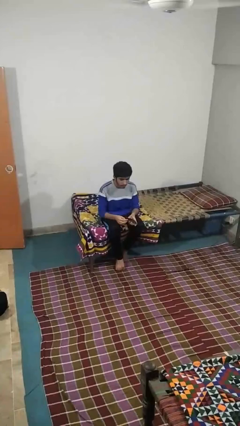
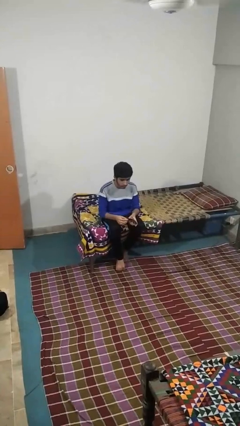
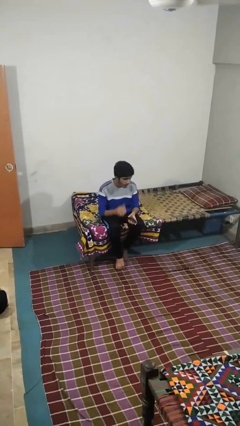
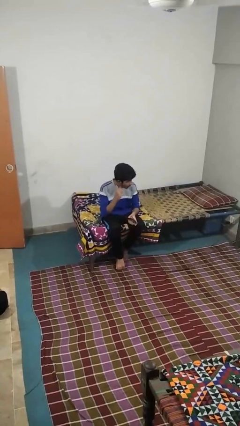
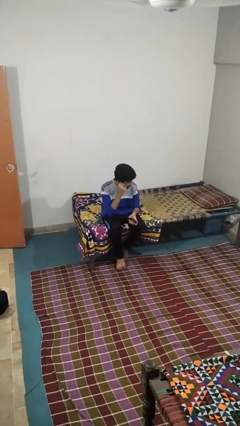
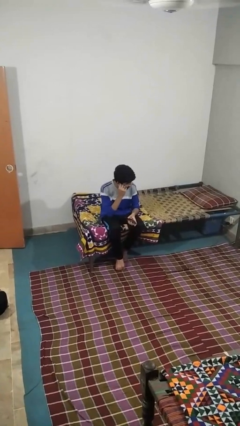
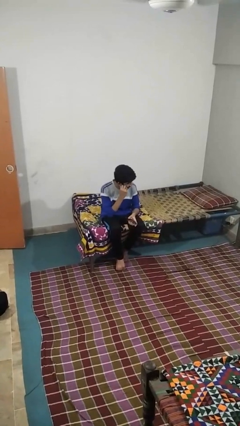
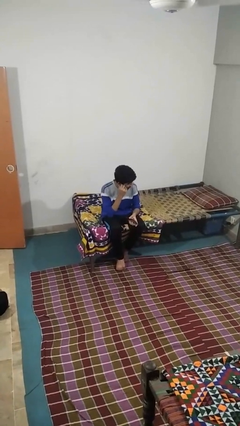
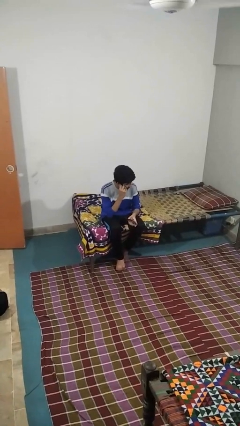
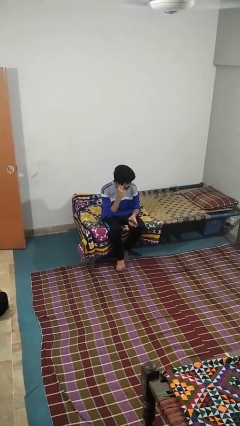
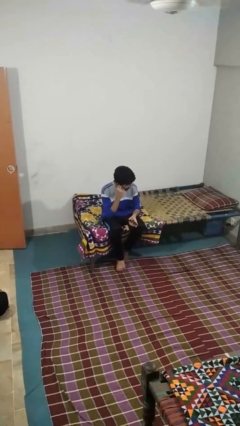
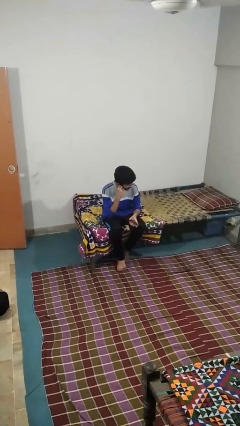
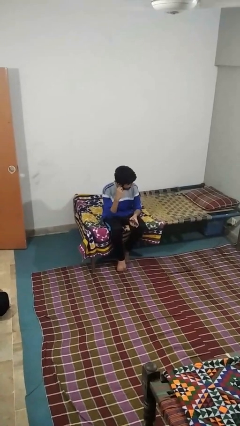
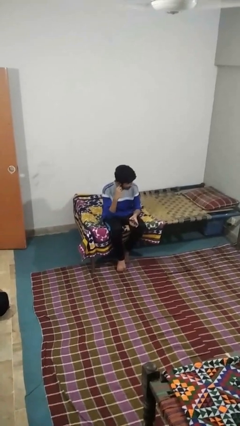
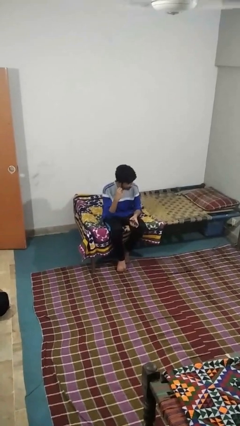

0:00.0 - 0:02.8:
person touches earlobe

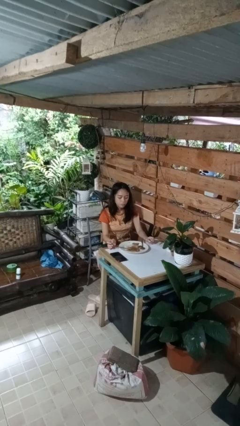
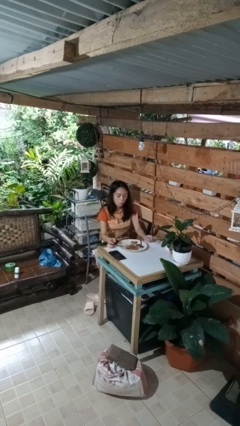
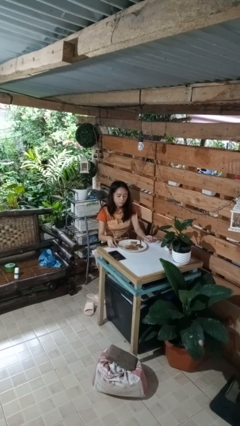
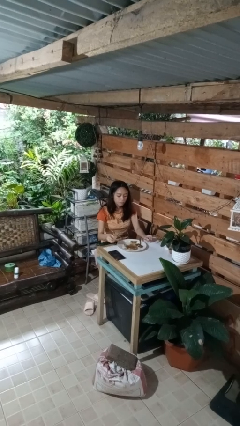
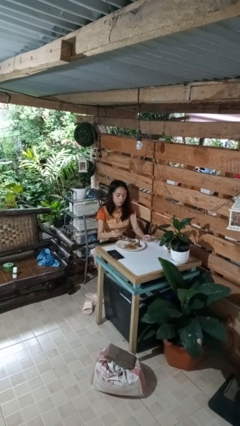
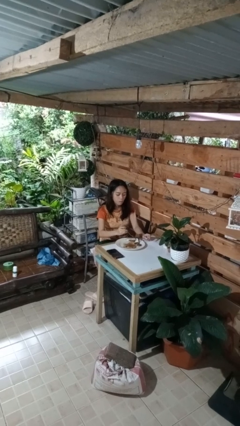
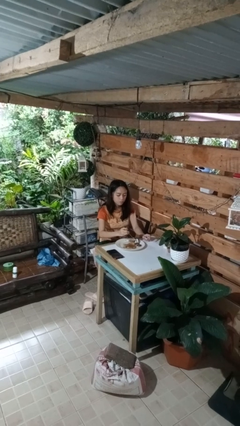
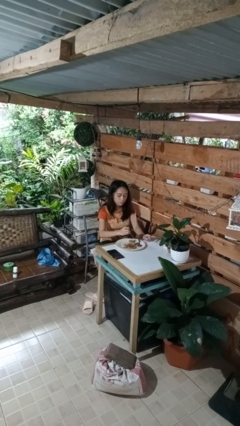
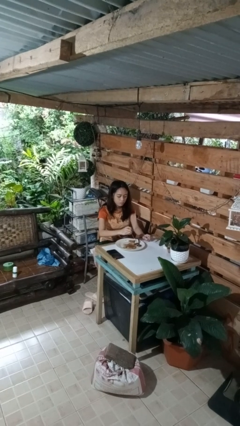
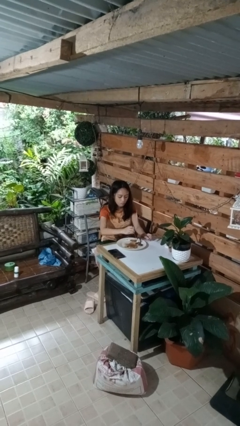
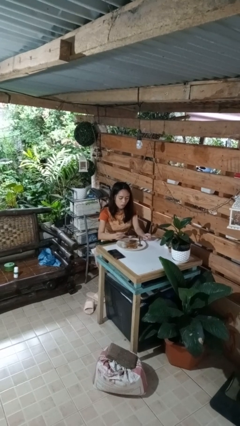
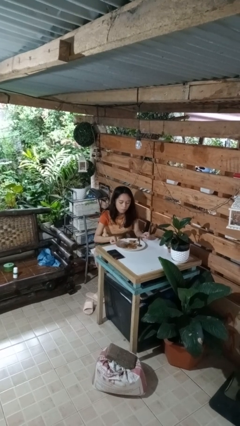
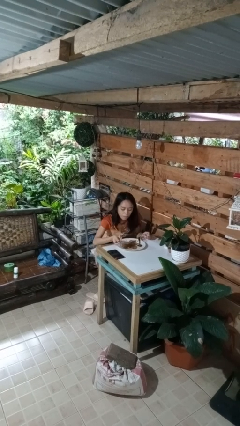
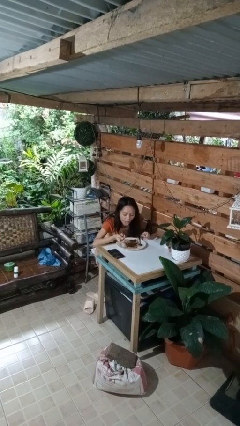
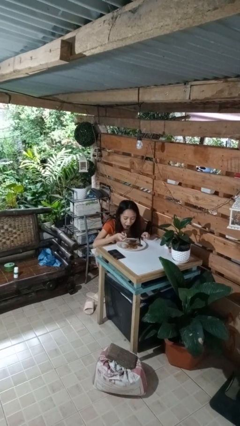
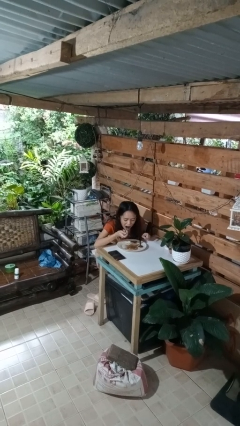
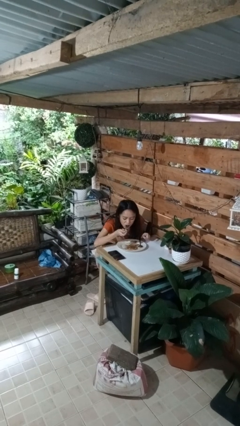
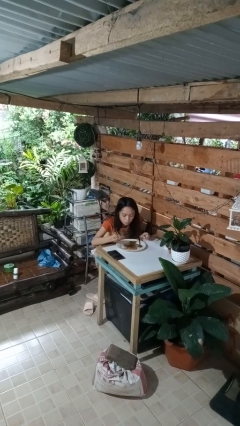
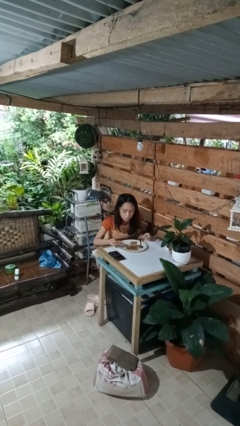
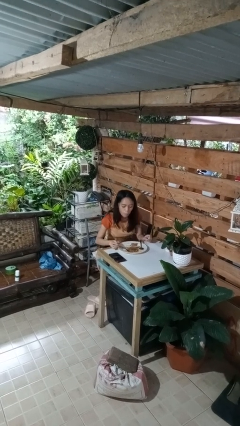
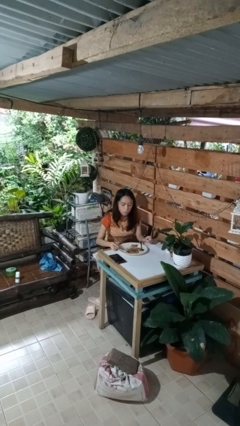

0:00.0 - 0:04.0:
person eats with utensil

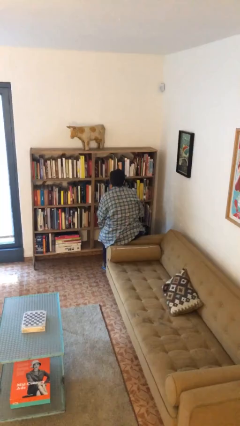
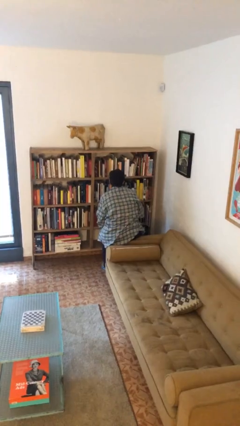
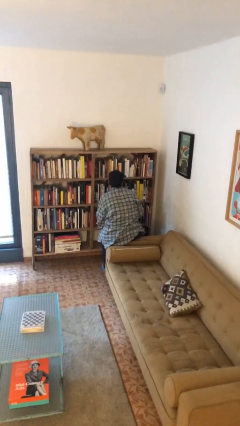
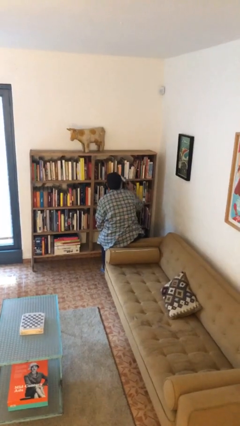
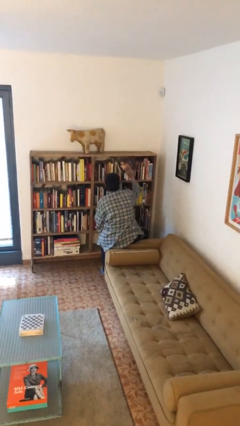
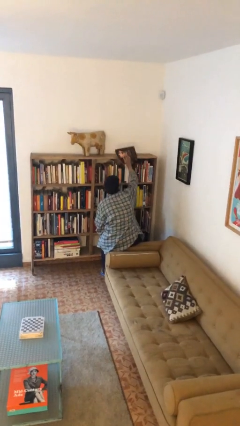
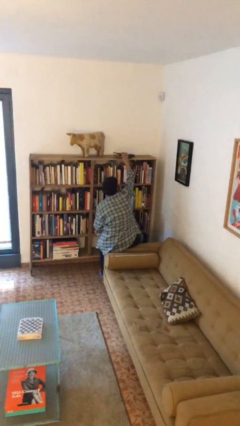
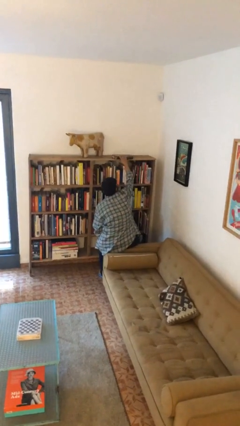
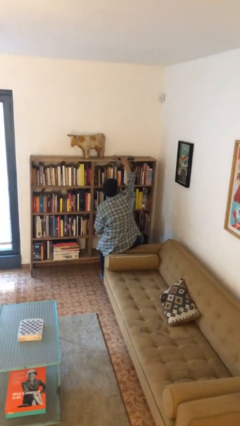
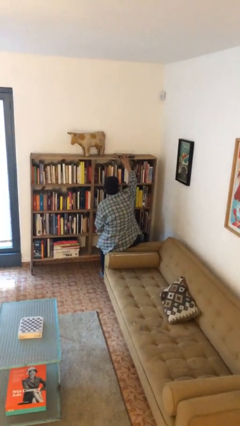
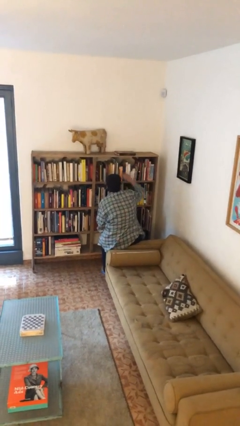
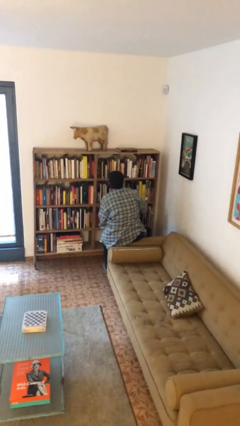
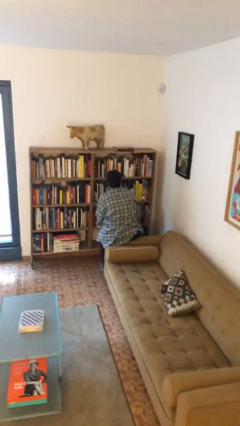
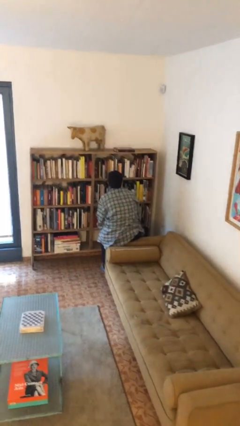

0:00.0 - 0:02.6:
person puts down object on shelf

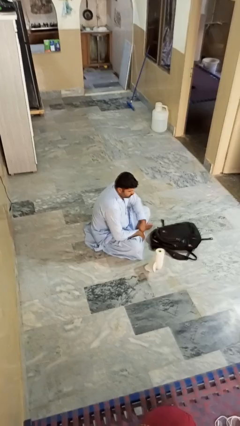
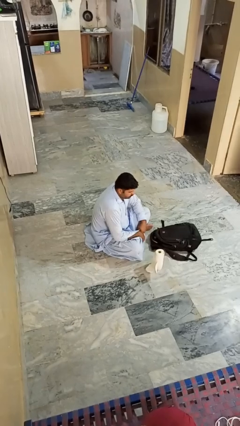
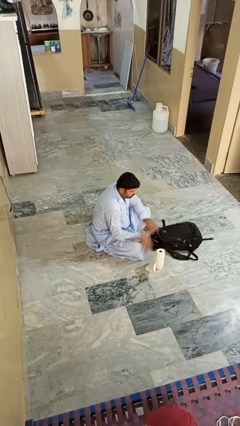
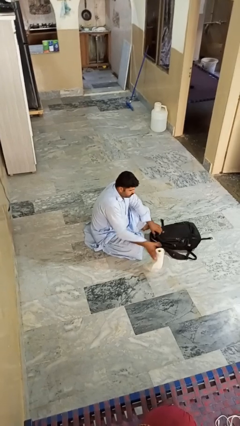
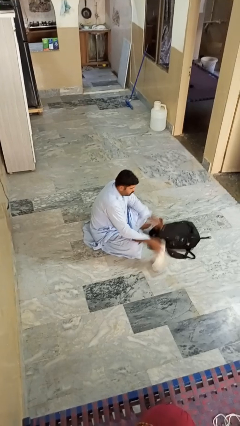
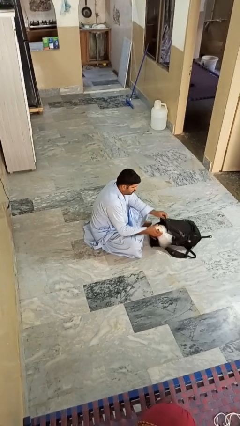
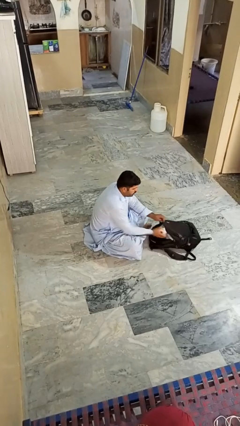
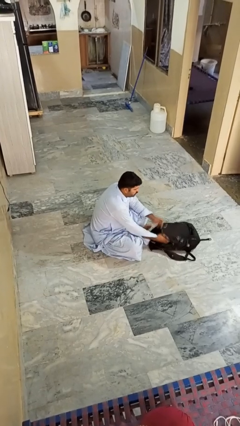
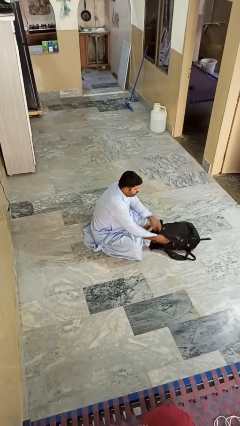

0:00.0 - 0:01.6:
person puts object into bag

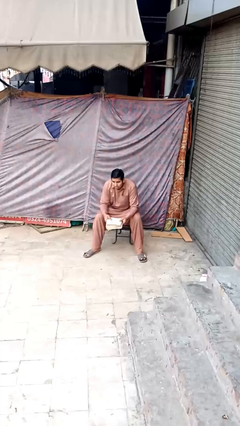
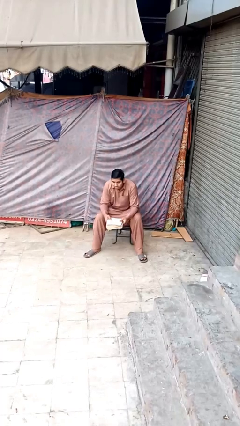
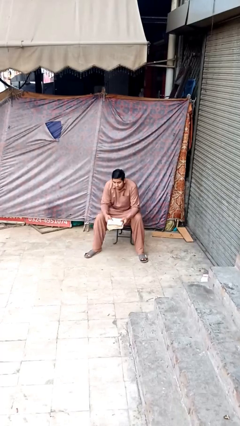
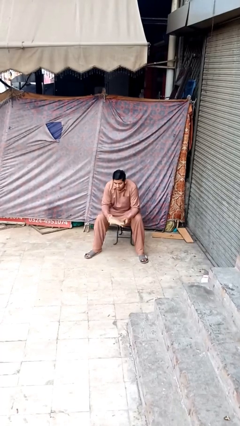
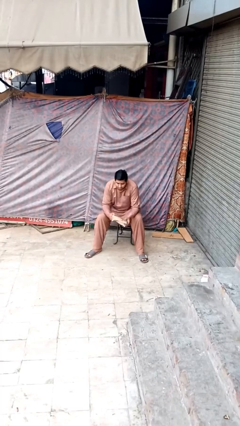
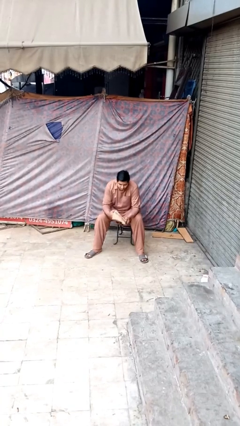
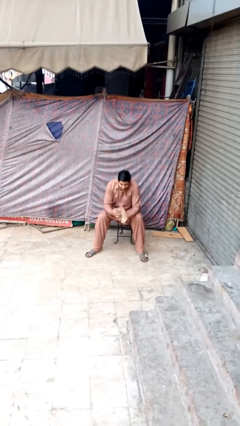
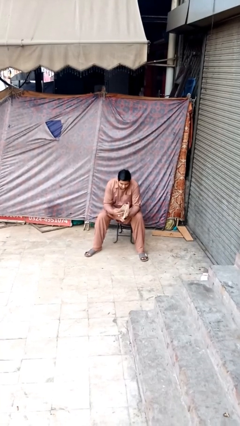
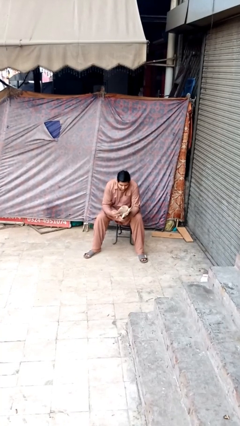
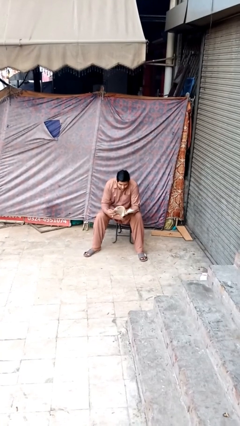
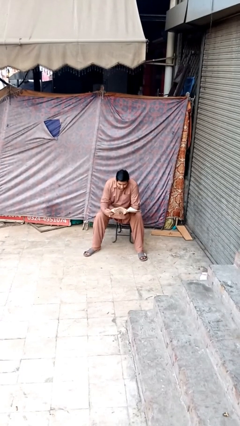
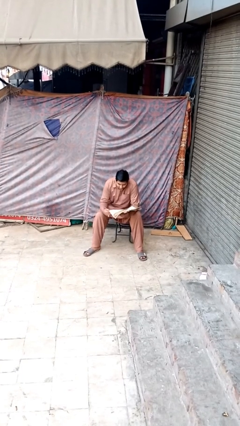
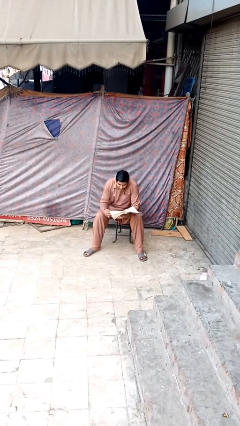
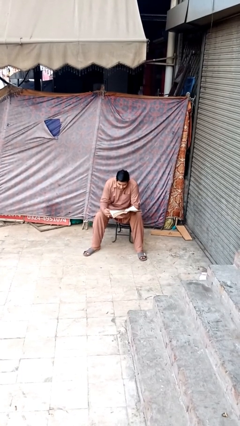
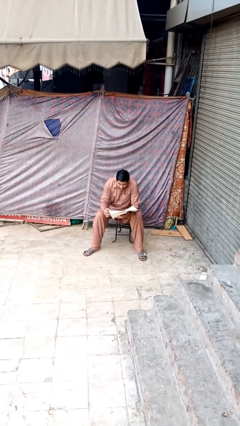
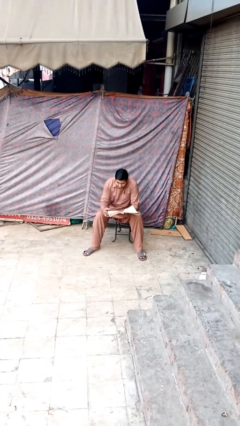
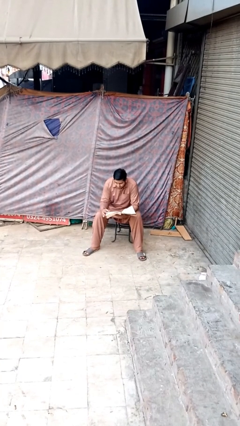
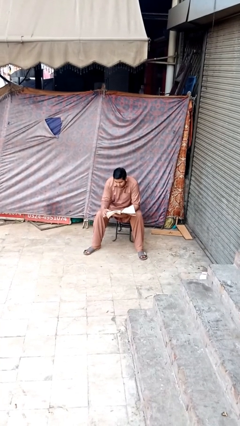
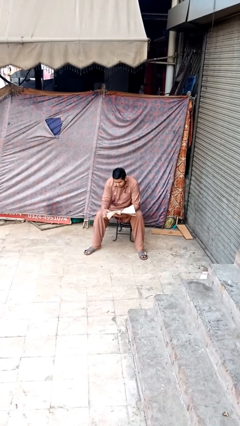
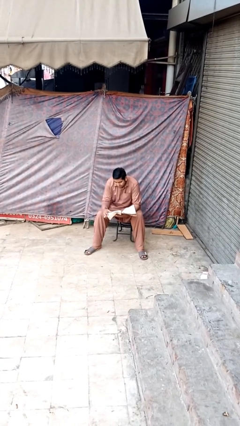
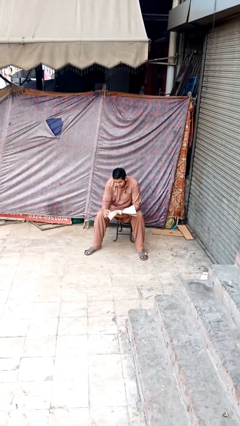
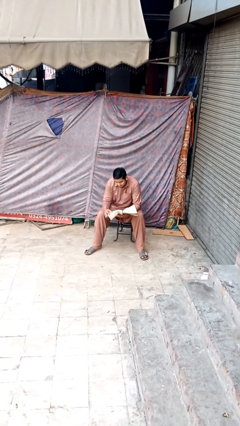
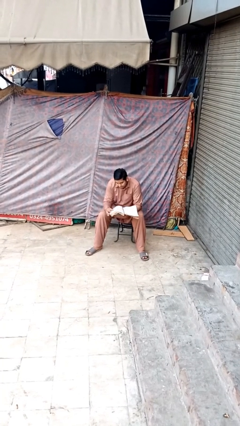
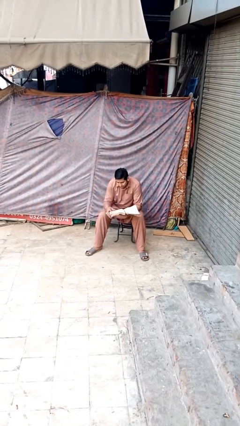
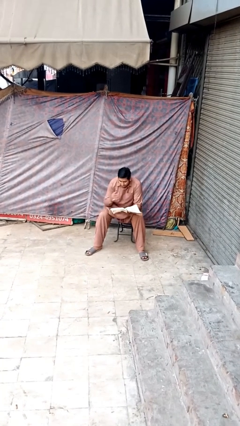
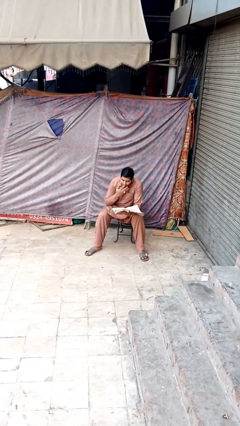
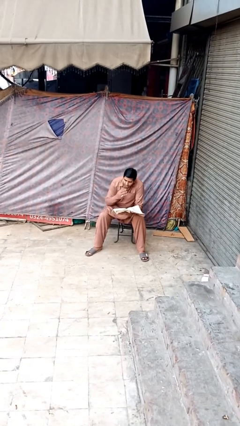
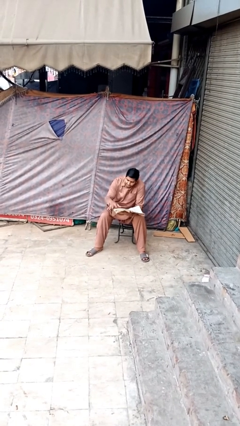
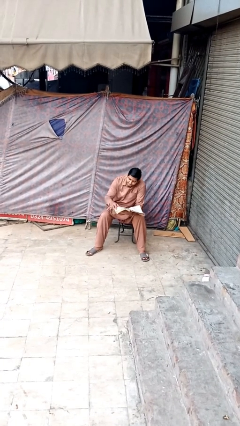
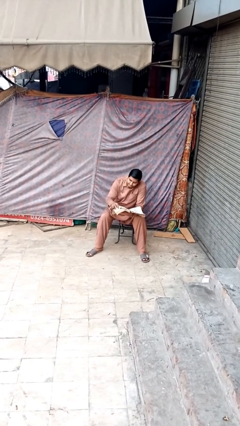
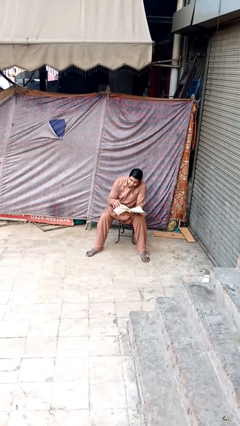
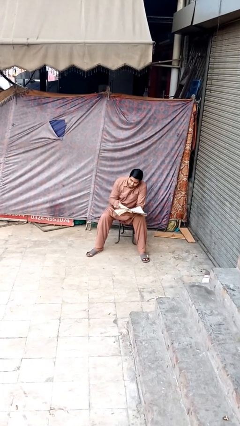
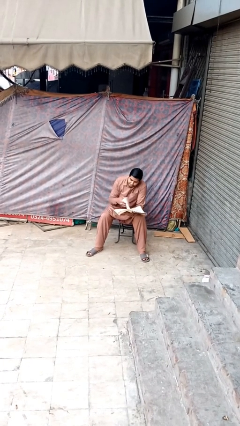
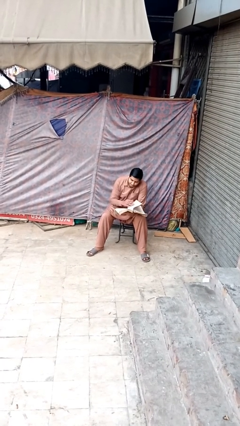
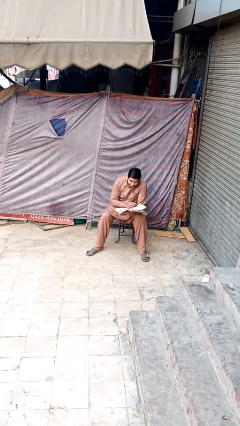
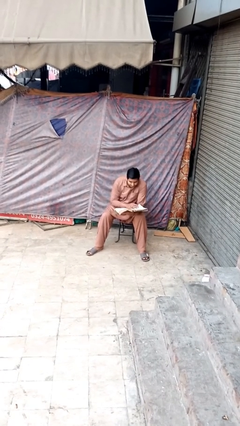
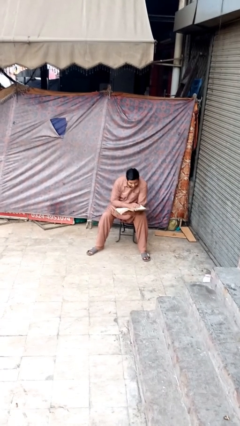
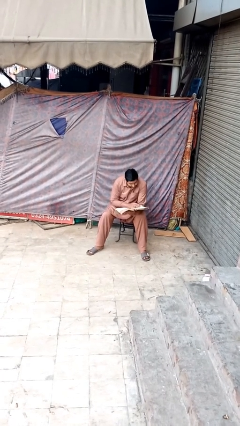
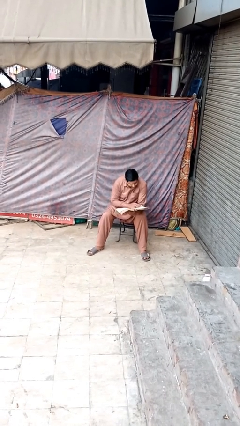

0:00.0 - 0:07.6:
person reads document
